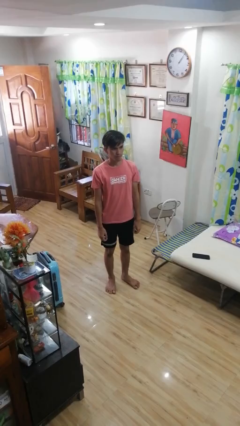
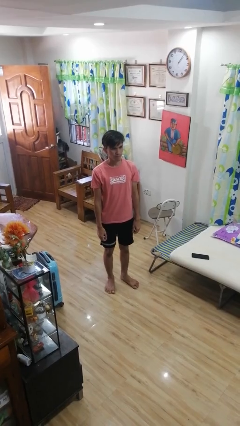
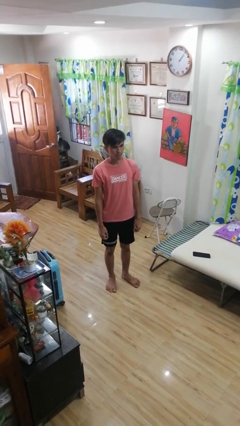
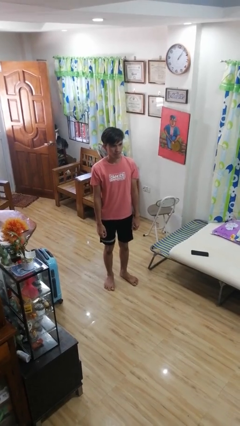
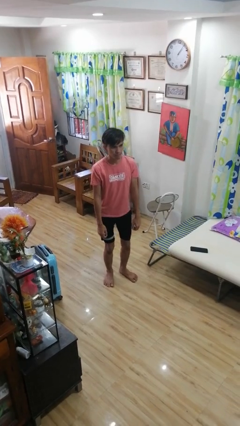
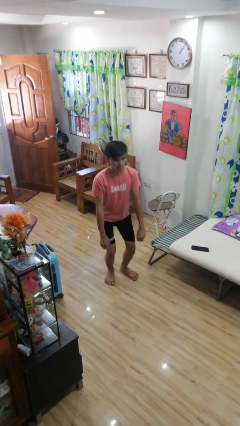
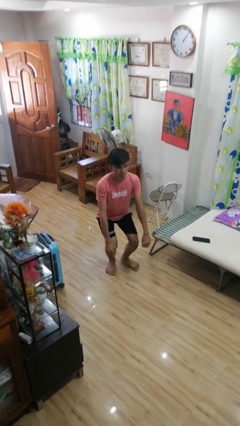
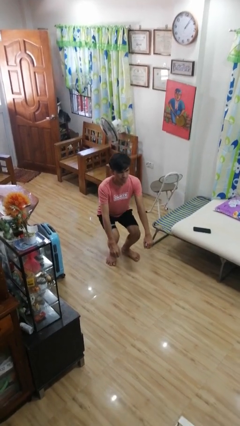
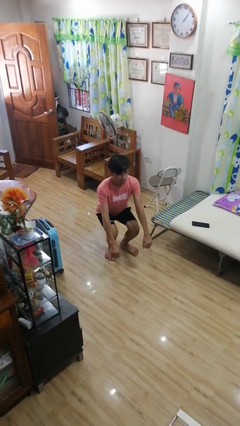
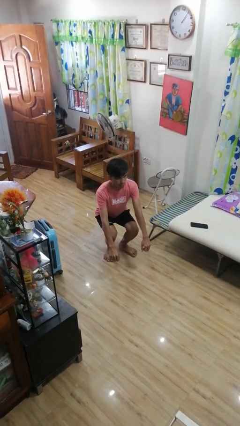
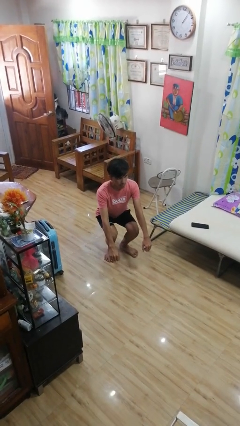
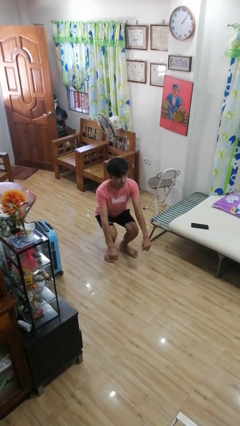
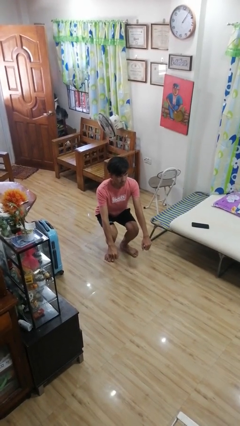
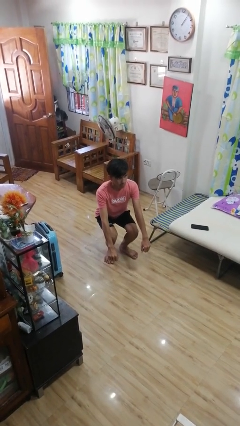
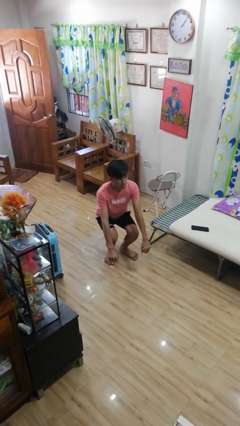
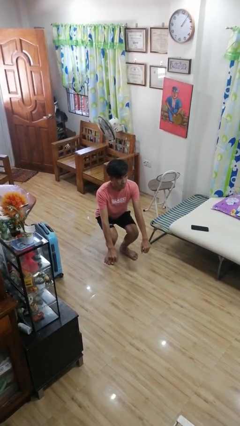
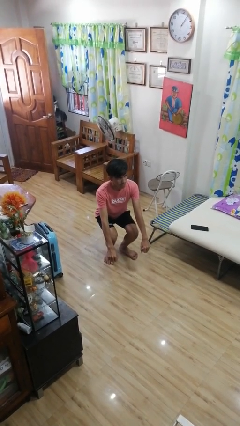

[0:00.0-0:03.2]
person squats

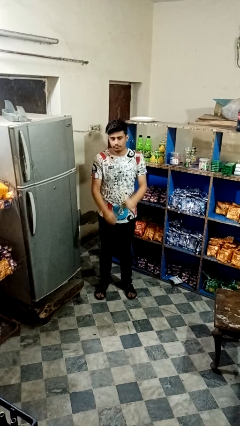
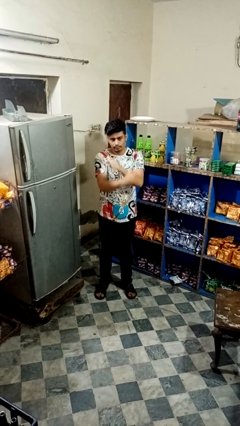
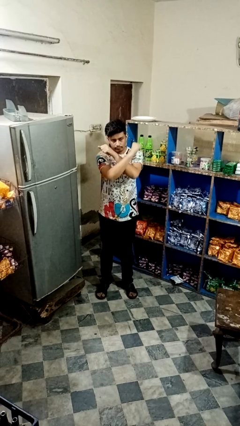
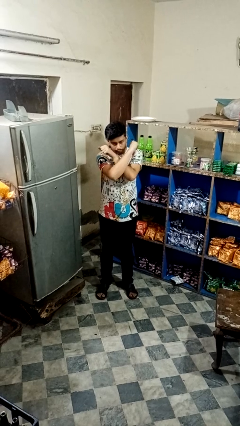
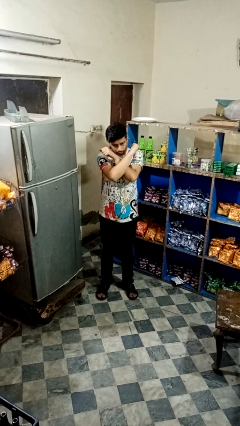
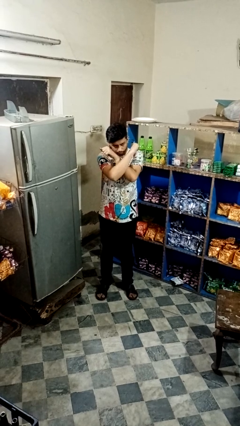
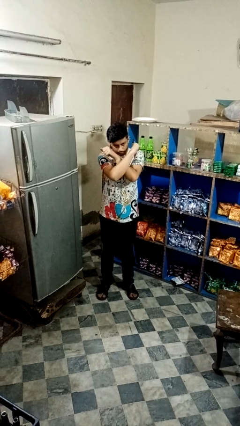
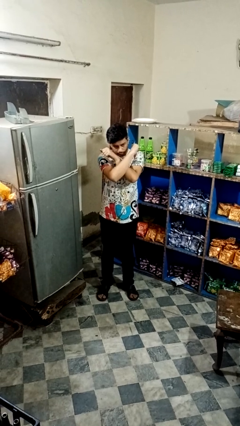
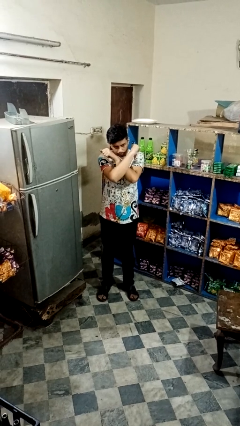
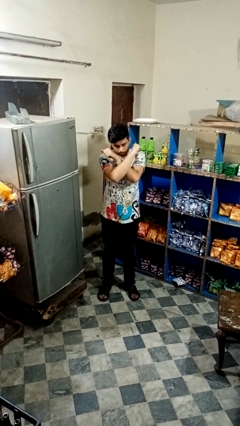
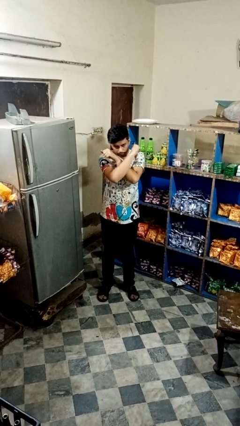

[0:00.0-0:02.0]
person gestures arms x

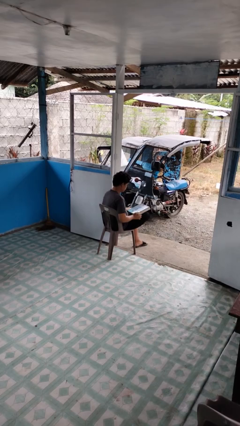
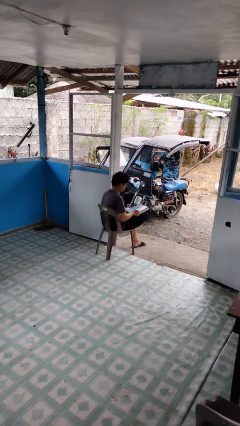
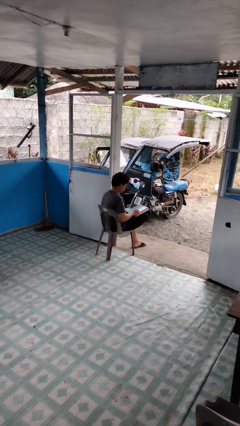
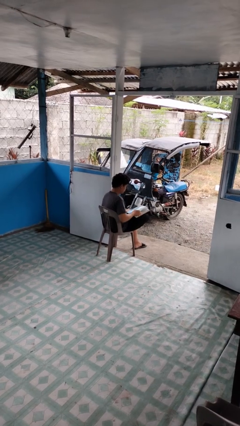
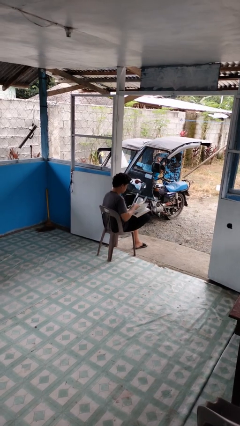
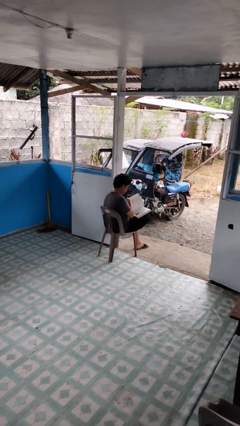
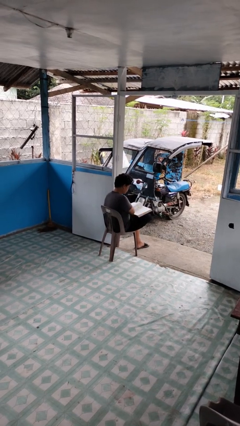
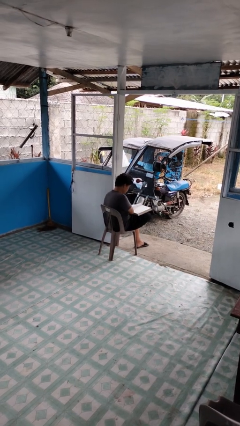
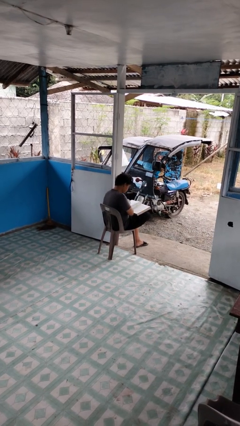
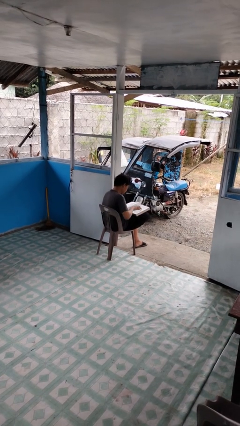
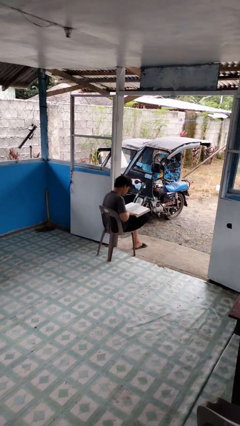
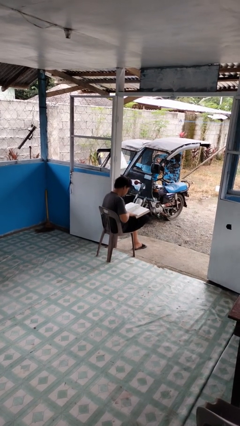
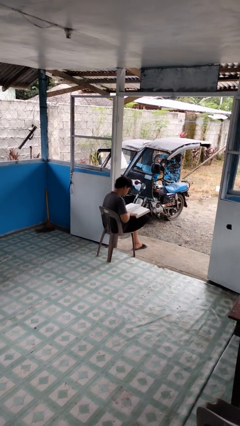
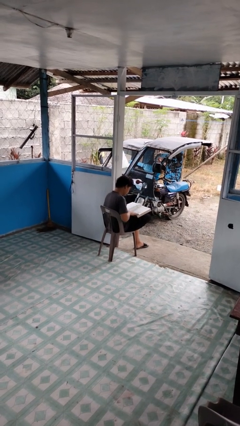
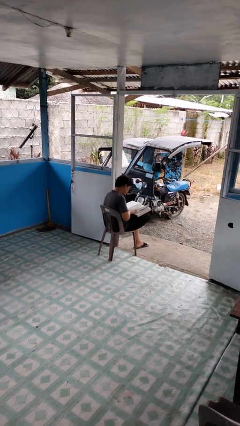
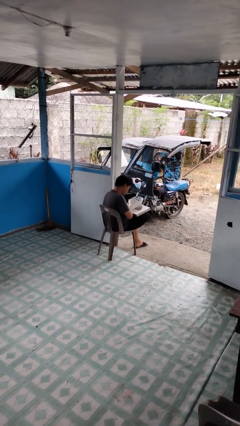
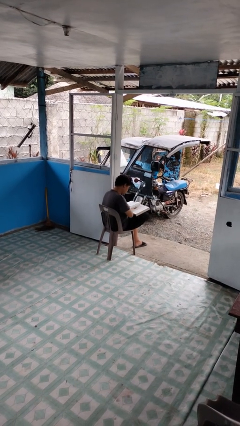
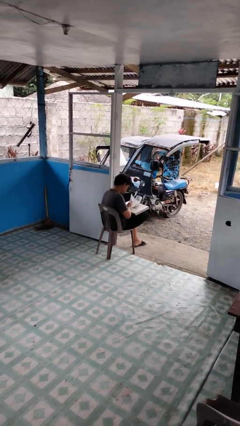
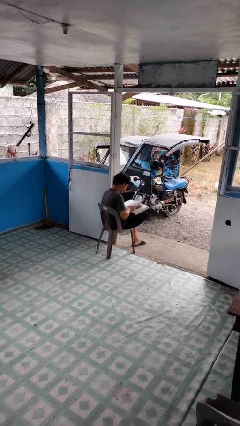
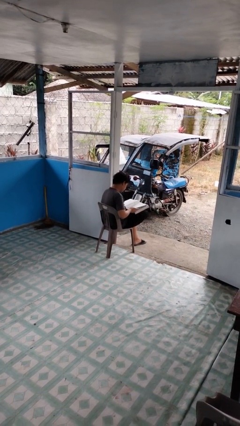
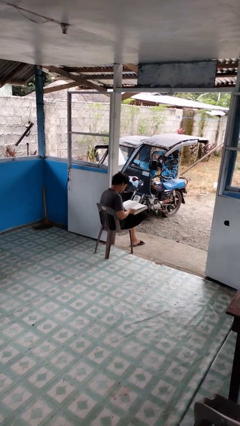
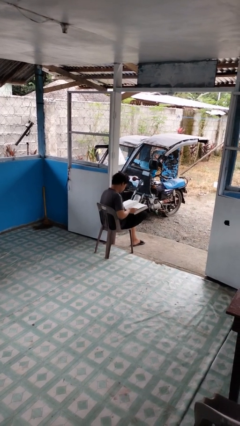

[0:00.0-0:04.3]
person reads book

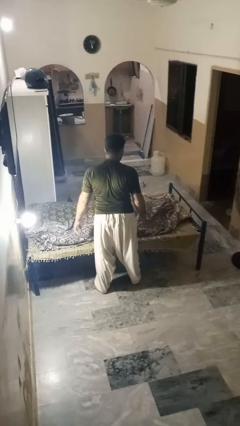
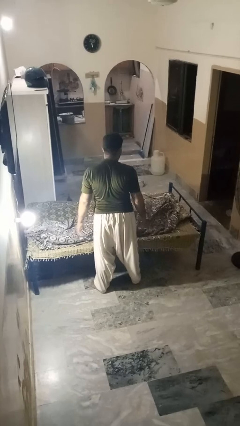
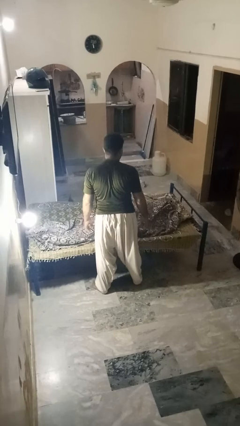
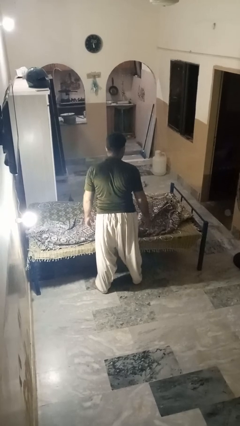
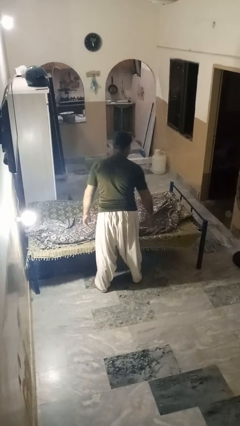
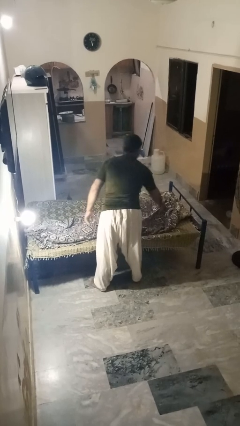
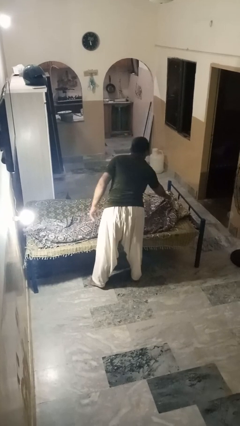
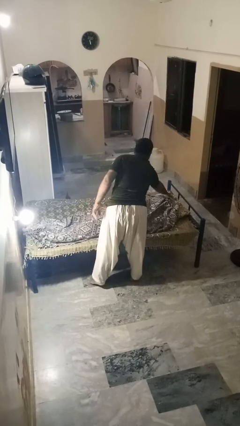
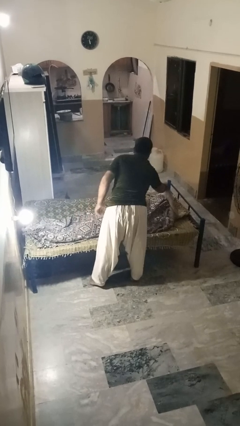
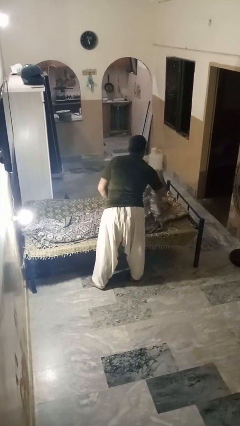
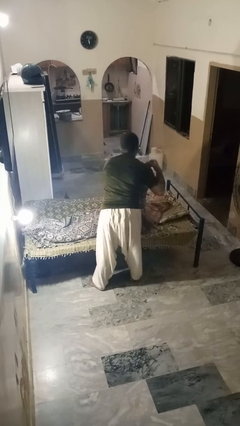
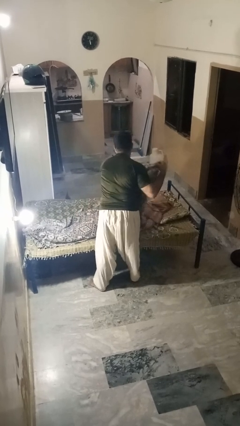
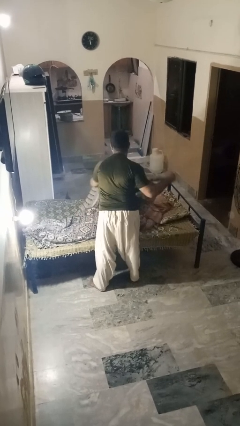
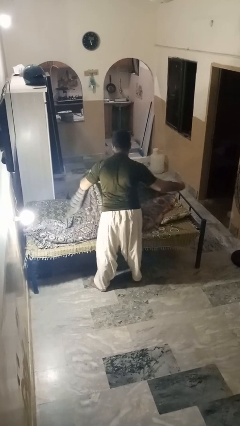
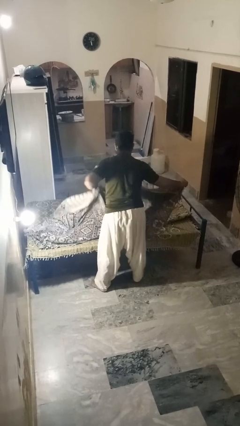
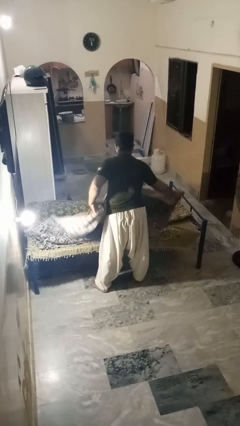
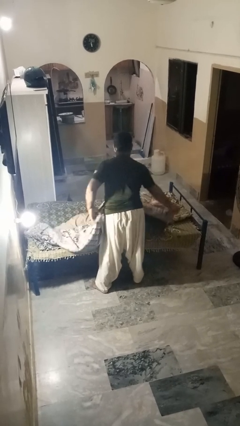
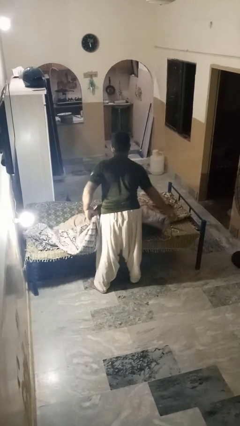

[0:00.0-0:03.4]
person uncovers friend with blanket

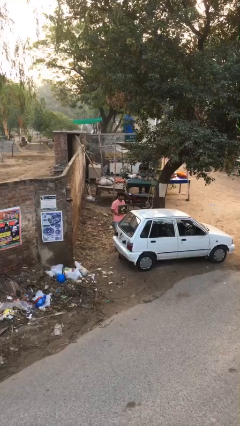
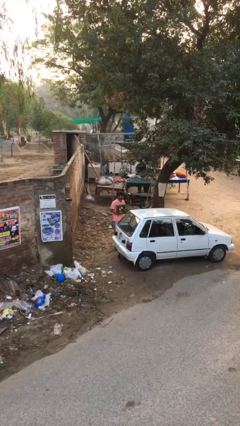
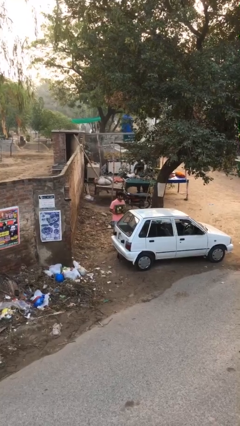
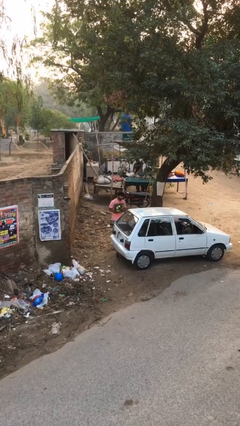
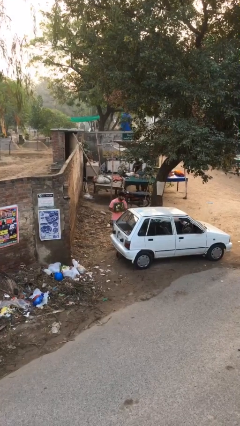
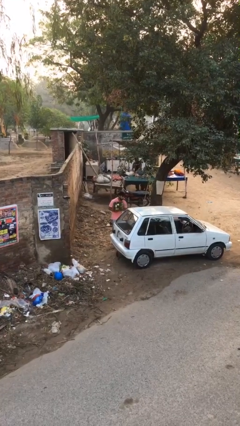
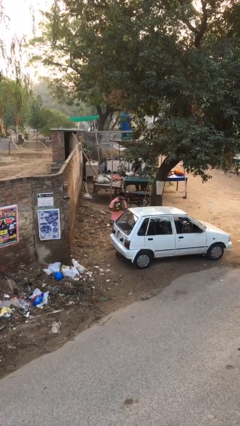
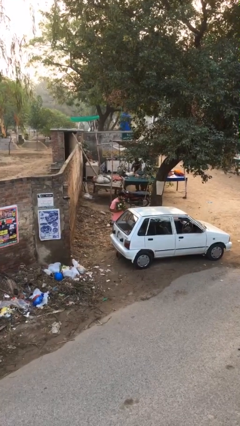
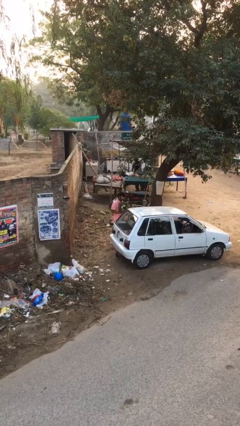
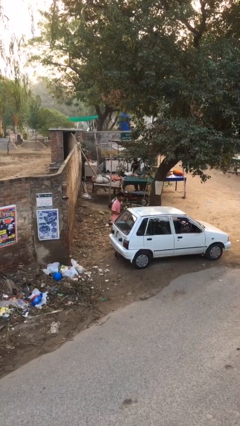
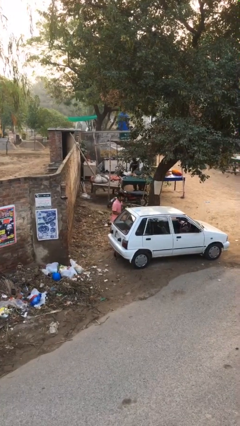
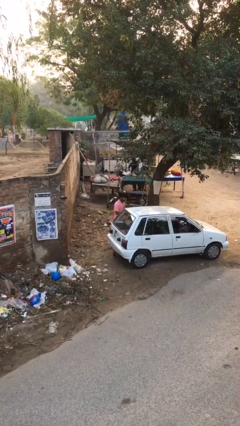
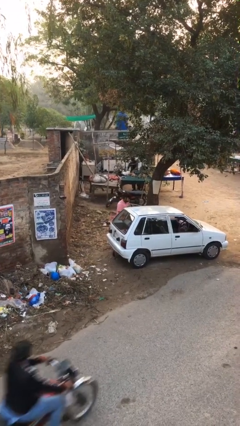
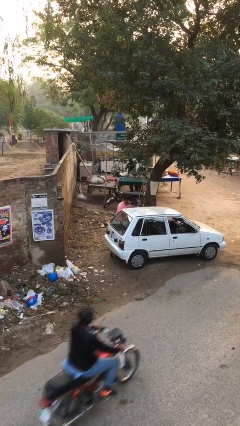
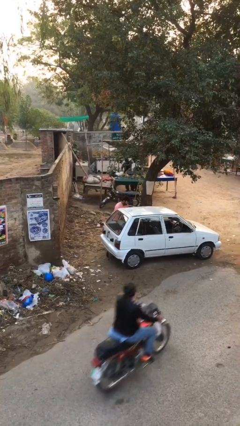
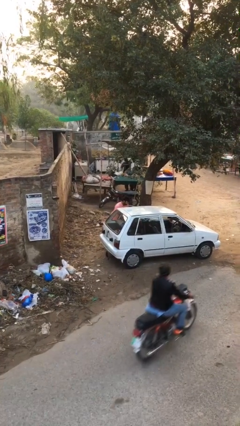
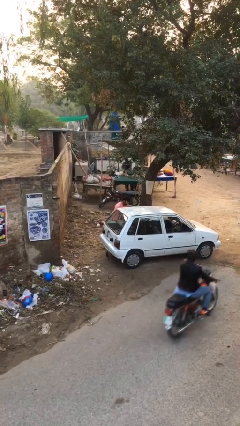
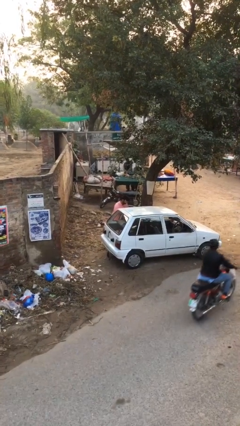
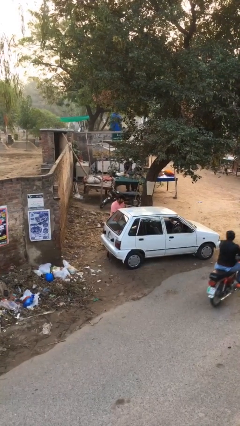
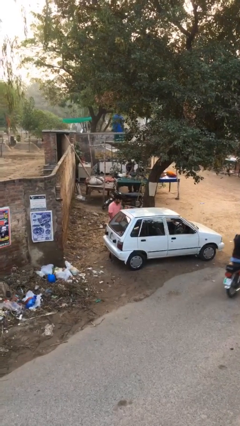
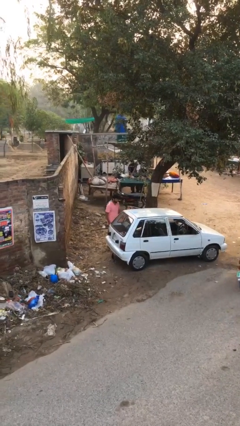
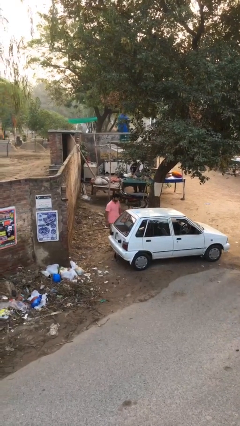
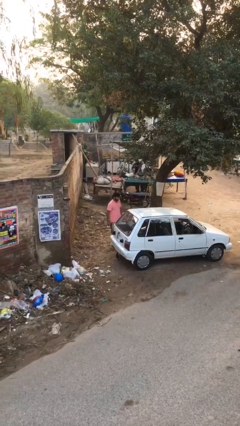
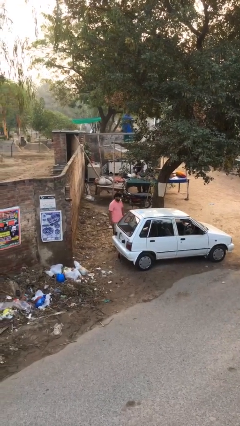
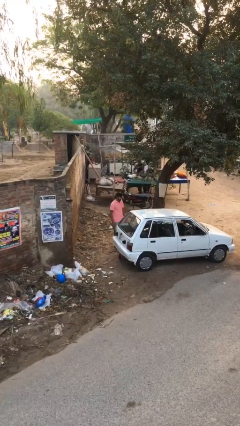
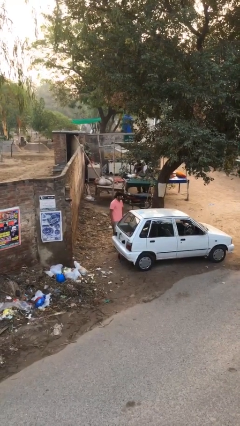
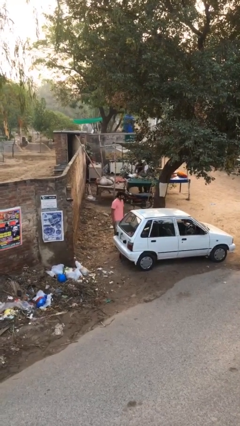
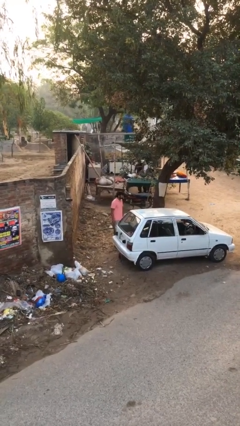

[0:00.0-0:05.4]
person loads car
